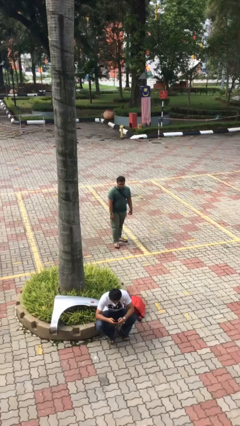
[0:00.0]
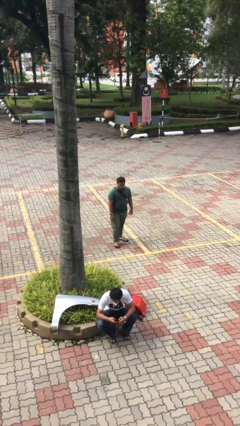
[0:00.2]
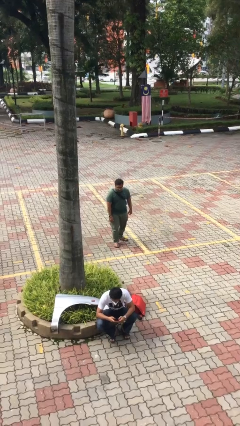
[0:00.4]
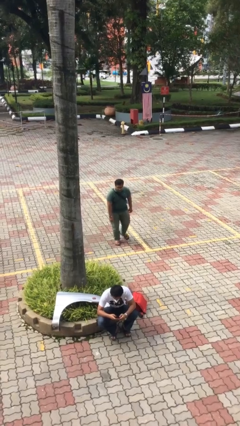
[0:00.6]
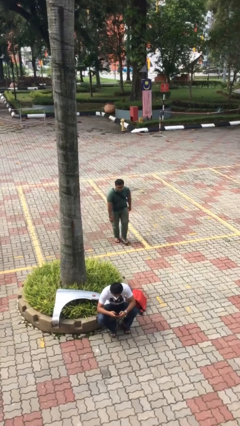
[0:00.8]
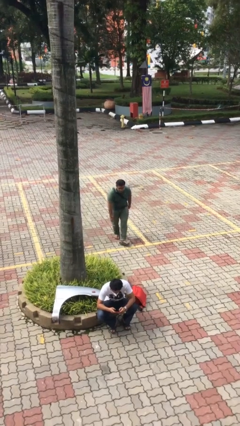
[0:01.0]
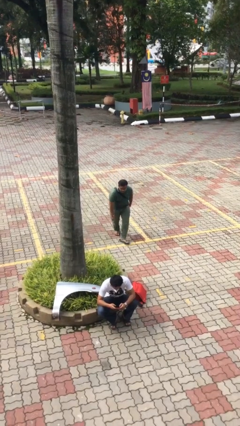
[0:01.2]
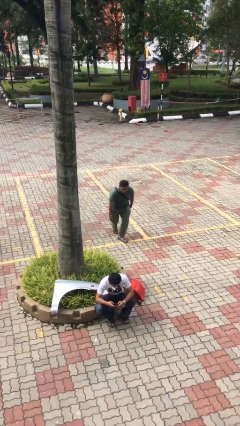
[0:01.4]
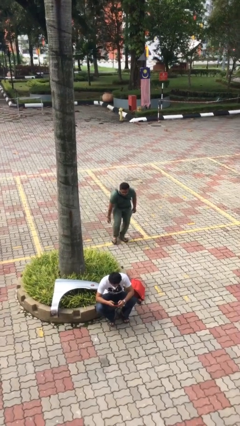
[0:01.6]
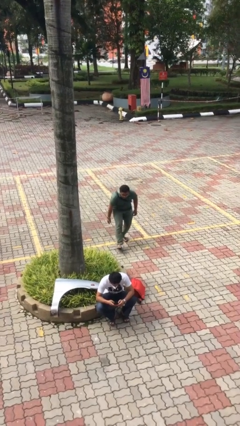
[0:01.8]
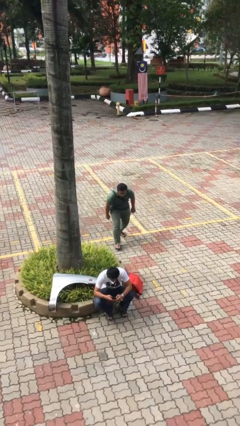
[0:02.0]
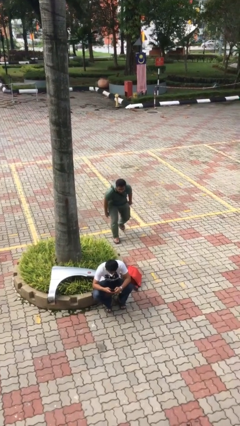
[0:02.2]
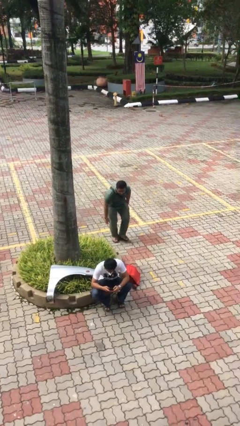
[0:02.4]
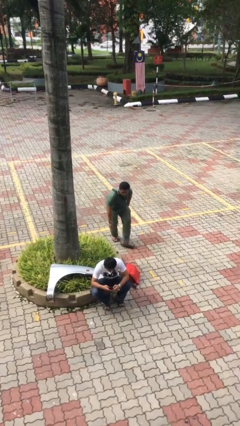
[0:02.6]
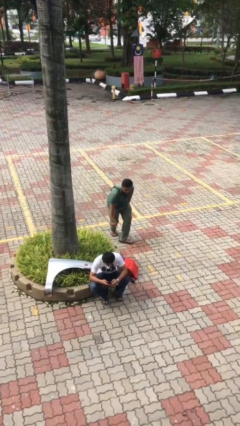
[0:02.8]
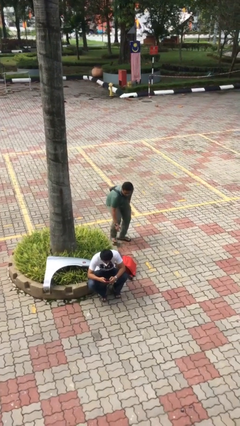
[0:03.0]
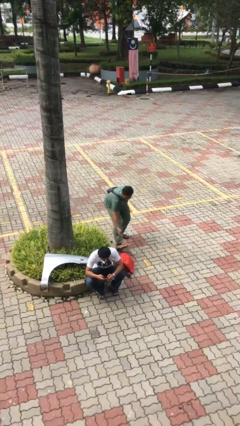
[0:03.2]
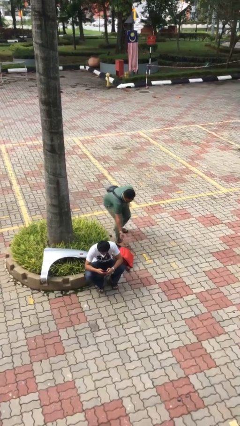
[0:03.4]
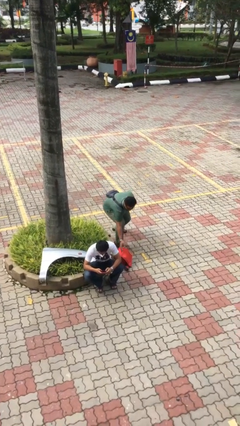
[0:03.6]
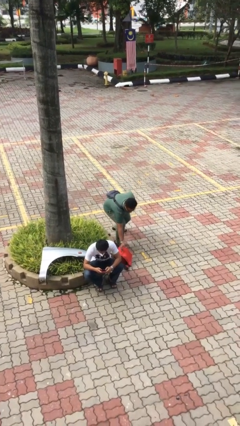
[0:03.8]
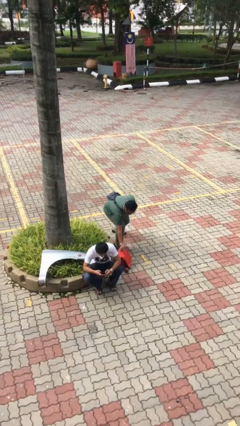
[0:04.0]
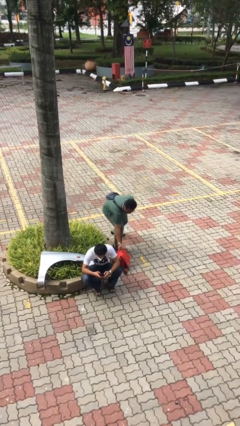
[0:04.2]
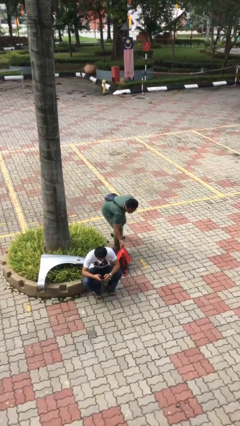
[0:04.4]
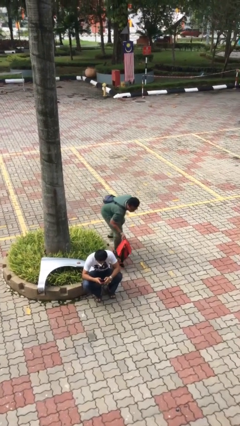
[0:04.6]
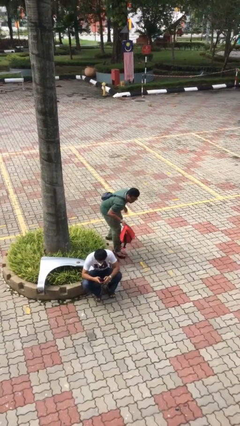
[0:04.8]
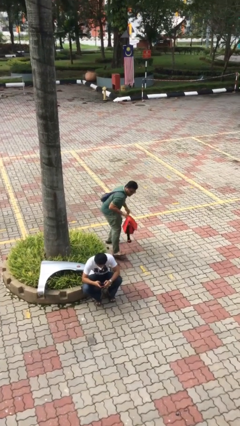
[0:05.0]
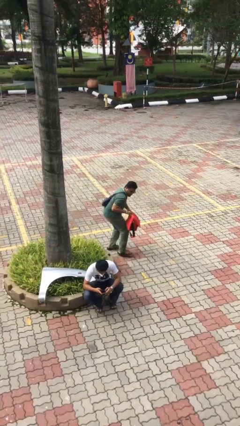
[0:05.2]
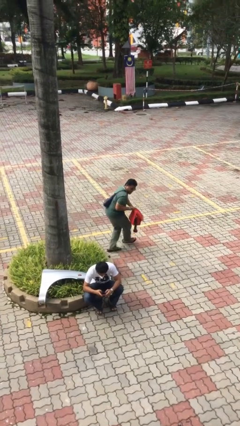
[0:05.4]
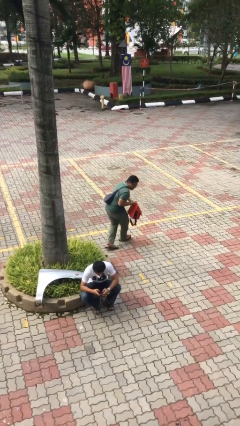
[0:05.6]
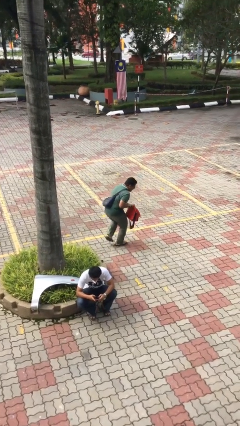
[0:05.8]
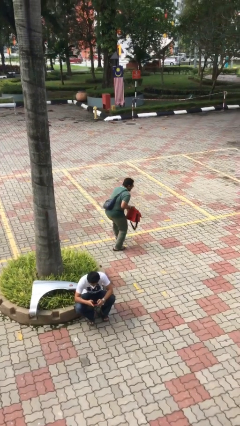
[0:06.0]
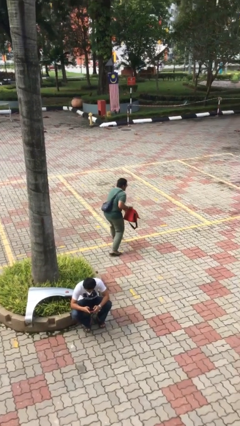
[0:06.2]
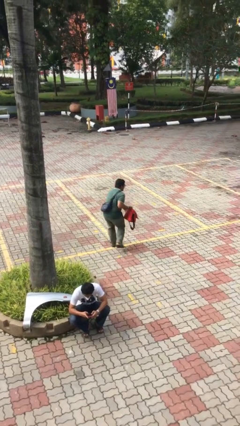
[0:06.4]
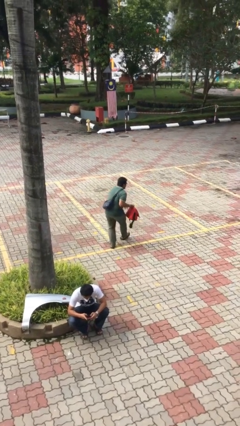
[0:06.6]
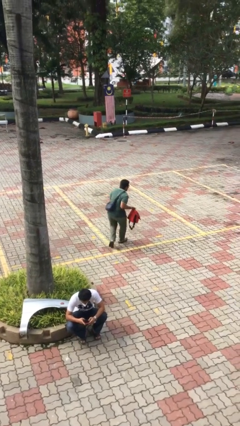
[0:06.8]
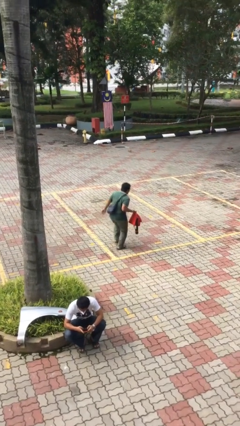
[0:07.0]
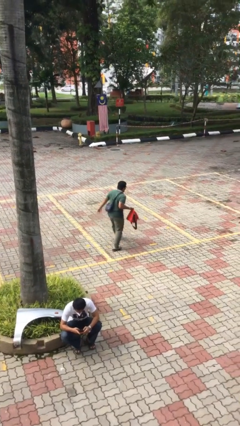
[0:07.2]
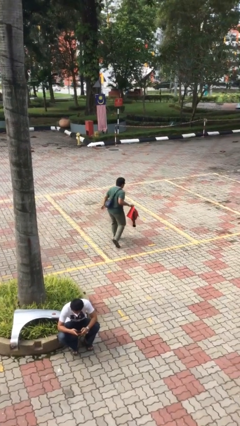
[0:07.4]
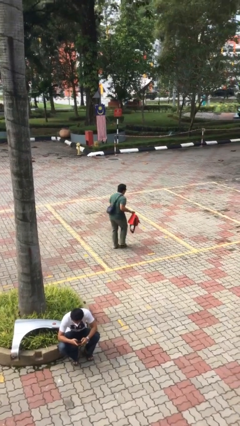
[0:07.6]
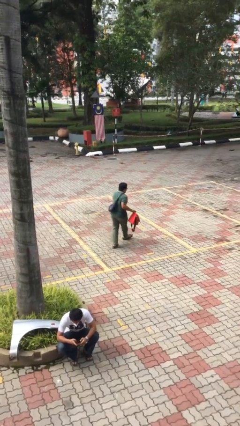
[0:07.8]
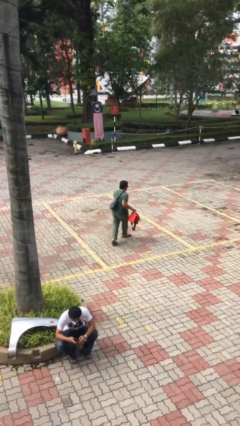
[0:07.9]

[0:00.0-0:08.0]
person steals object from person

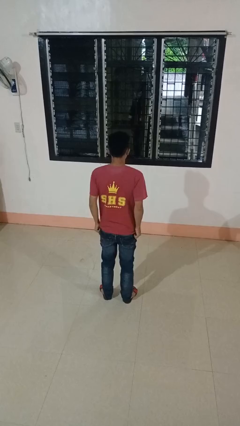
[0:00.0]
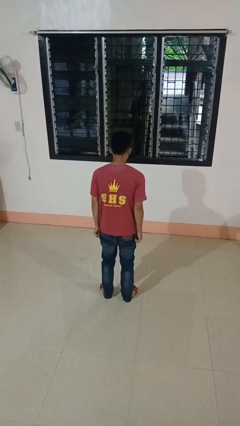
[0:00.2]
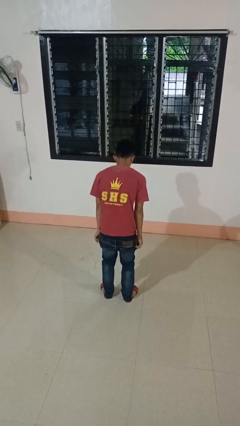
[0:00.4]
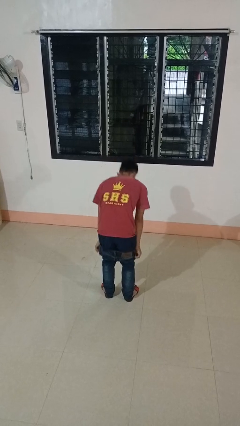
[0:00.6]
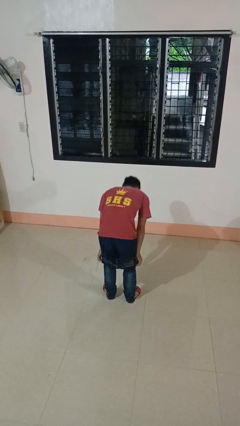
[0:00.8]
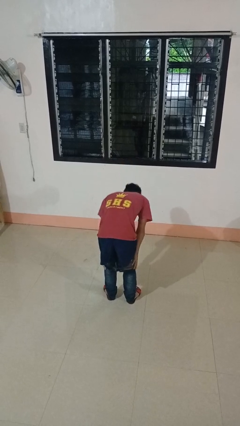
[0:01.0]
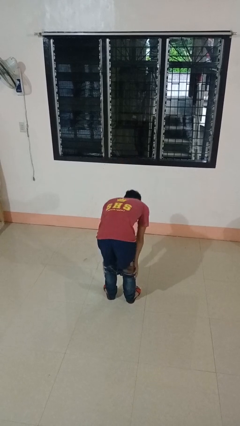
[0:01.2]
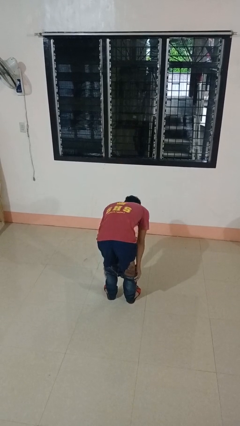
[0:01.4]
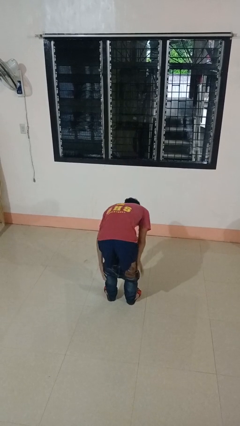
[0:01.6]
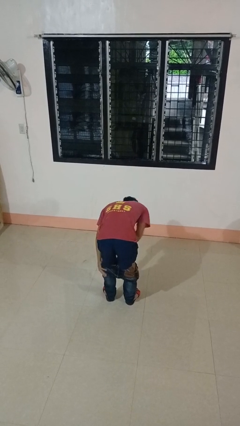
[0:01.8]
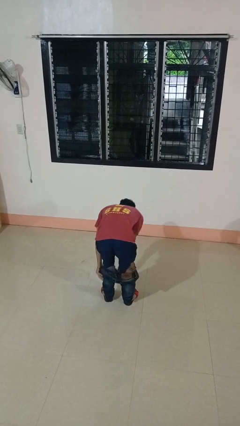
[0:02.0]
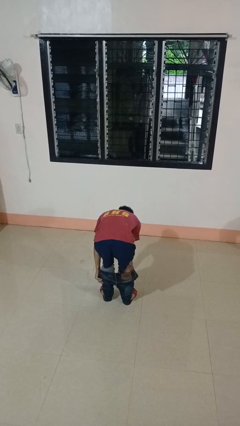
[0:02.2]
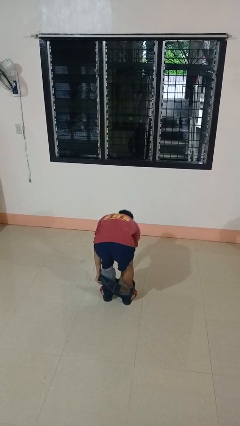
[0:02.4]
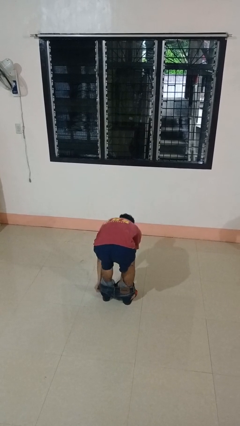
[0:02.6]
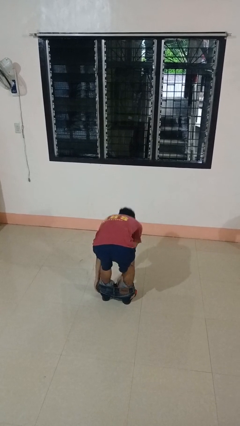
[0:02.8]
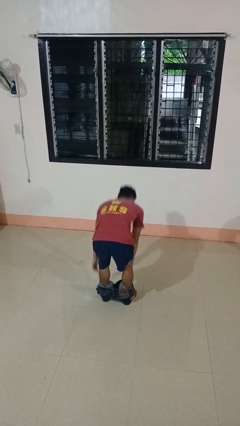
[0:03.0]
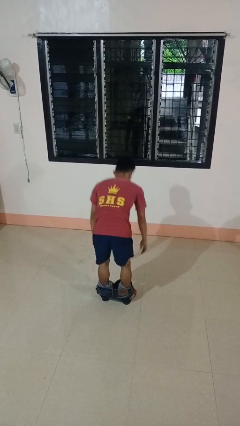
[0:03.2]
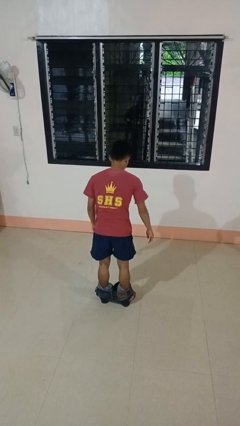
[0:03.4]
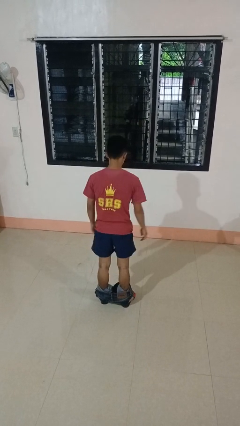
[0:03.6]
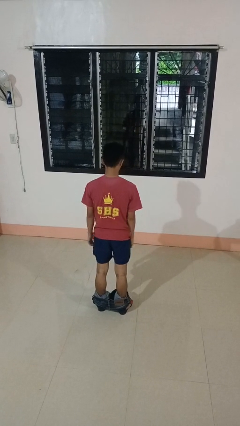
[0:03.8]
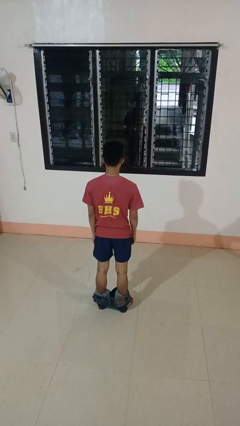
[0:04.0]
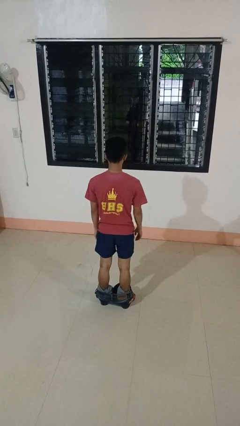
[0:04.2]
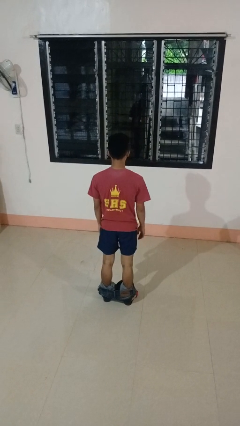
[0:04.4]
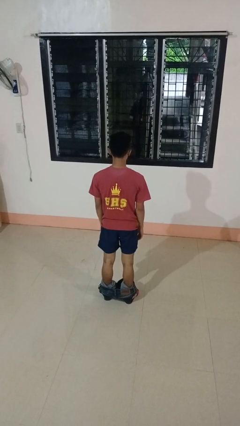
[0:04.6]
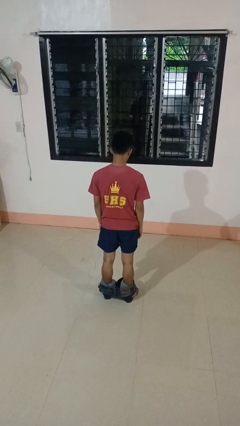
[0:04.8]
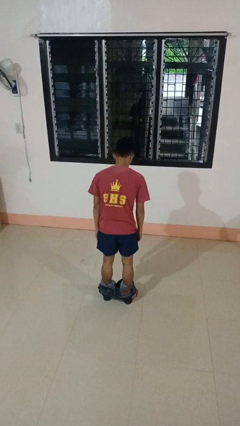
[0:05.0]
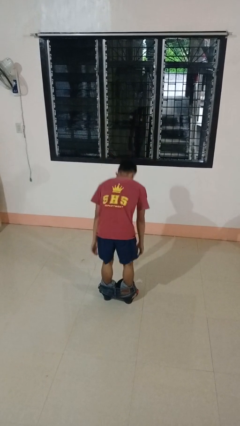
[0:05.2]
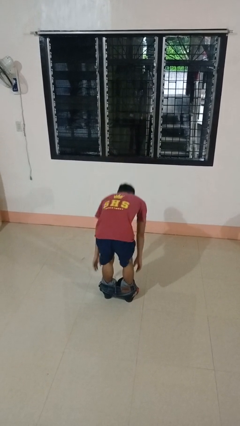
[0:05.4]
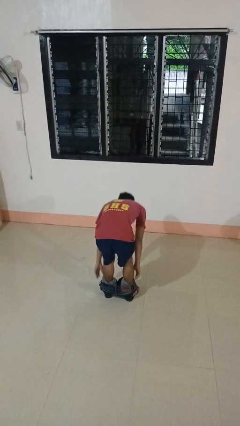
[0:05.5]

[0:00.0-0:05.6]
person takes off pants

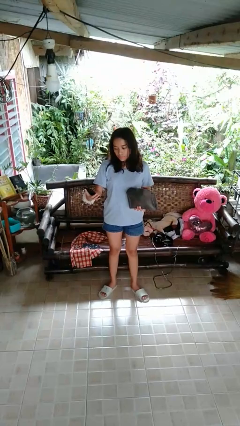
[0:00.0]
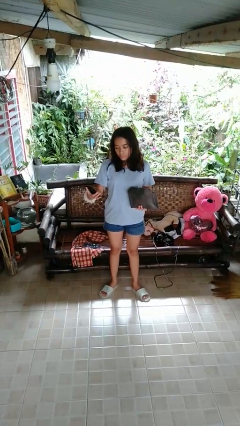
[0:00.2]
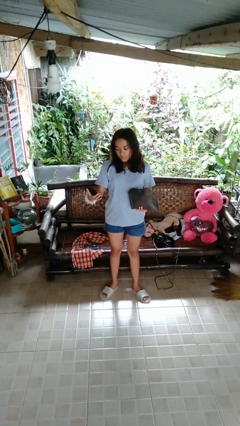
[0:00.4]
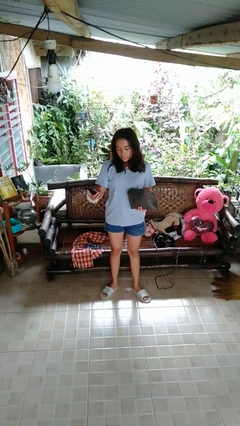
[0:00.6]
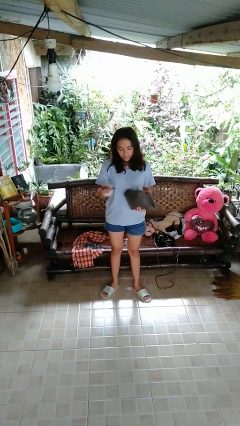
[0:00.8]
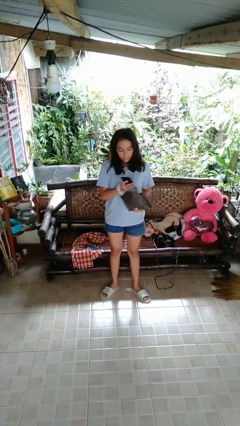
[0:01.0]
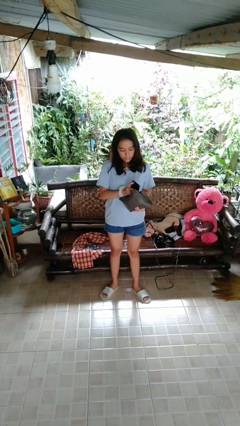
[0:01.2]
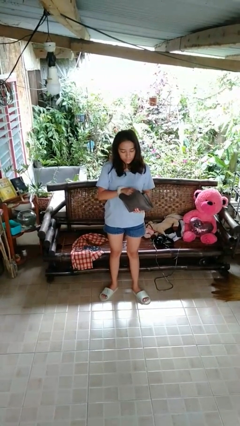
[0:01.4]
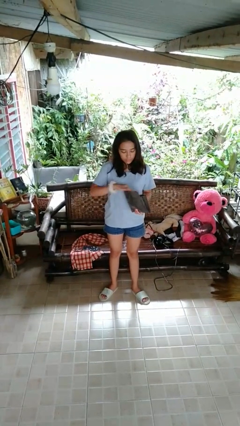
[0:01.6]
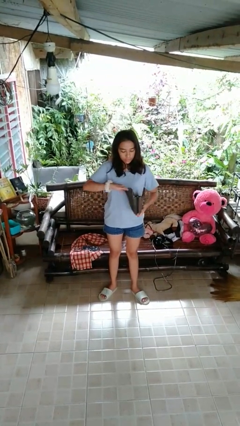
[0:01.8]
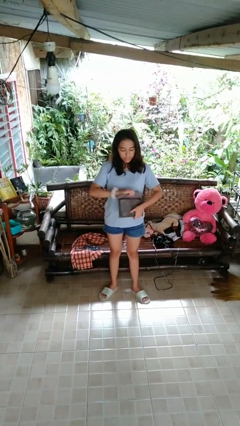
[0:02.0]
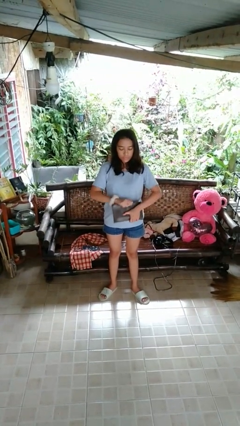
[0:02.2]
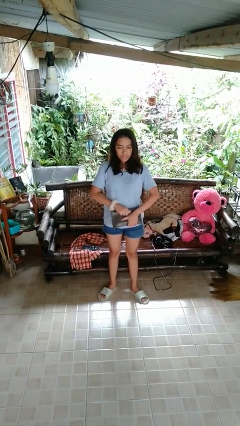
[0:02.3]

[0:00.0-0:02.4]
person puts object into purse

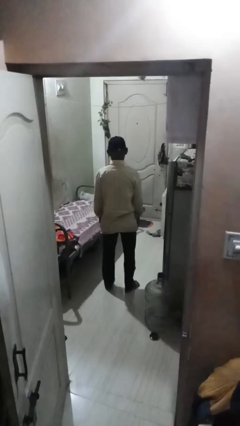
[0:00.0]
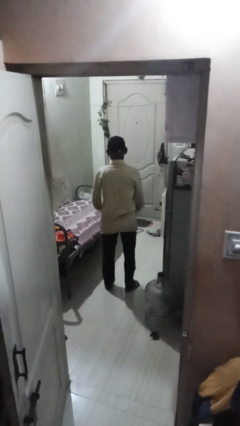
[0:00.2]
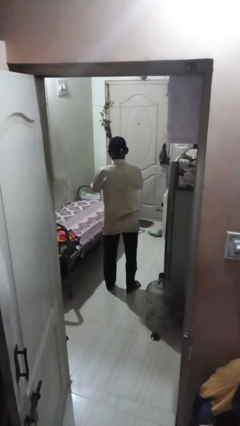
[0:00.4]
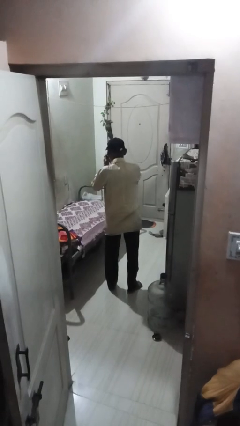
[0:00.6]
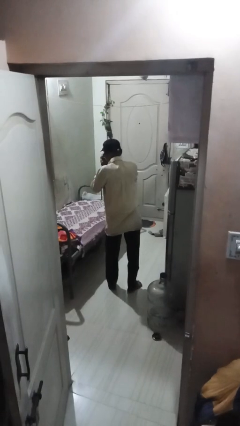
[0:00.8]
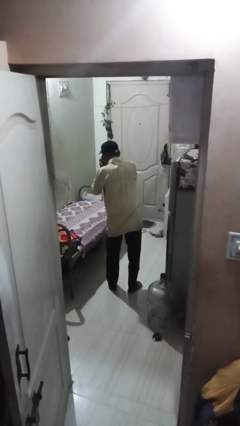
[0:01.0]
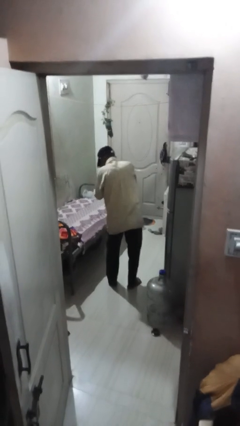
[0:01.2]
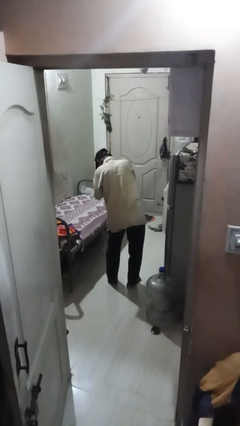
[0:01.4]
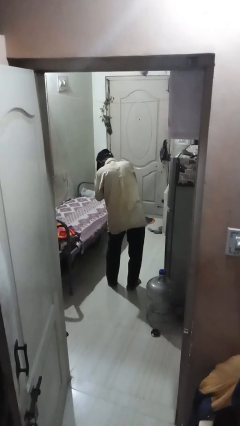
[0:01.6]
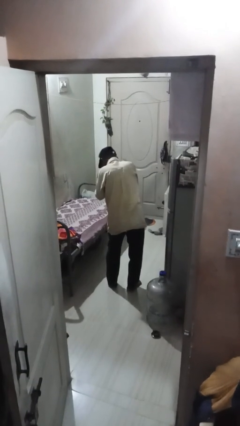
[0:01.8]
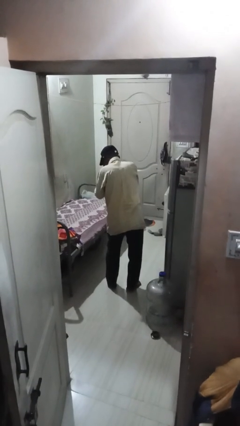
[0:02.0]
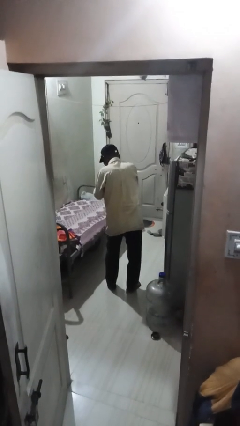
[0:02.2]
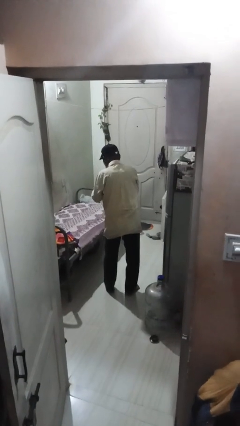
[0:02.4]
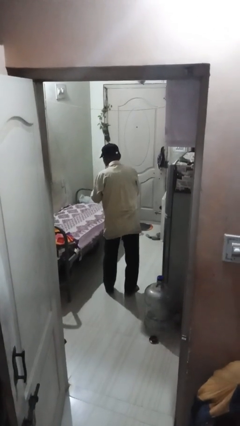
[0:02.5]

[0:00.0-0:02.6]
person sneezes into hand
